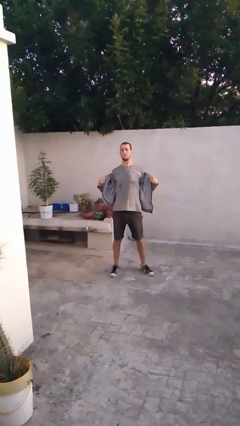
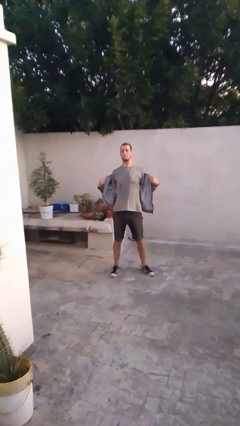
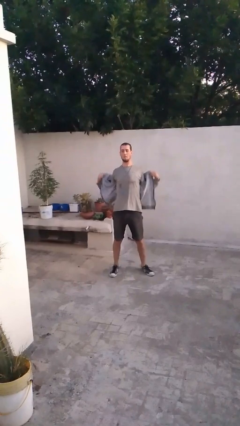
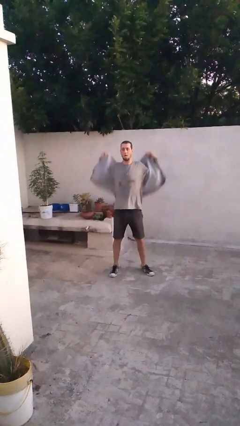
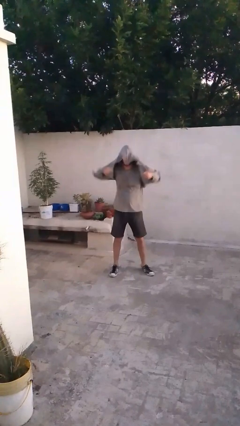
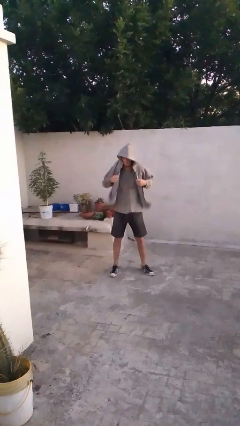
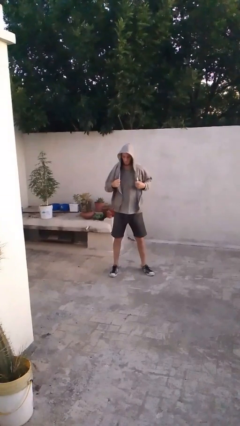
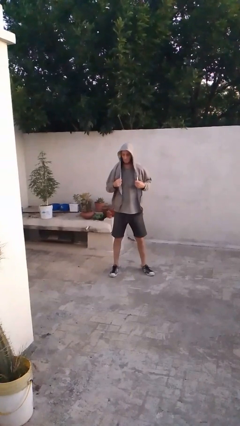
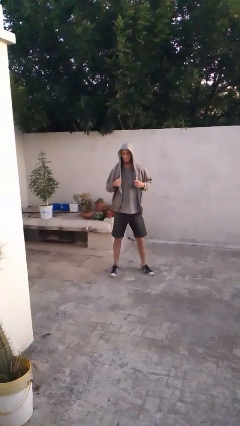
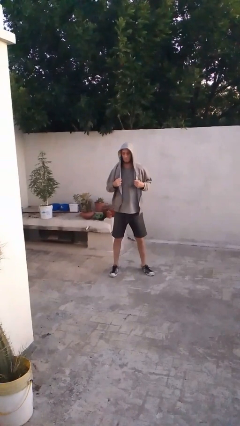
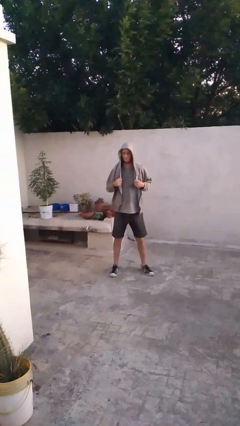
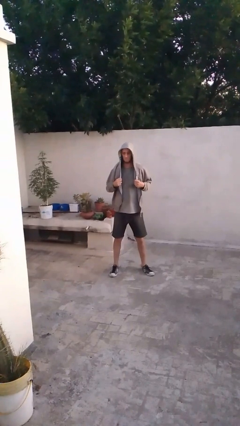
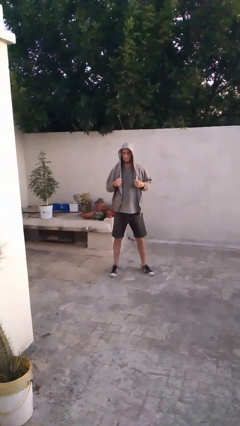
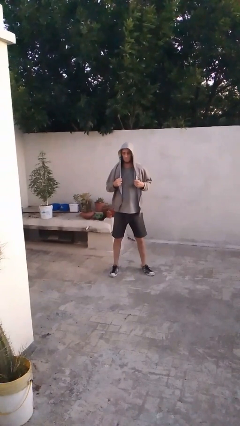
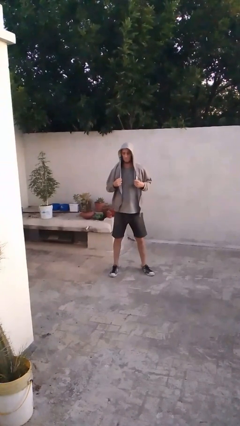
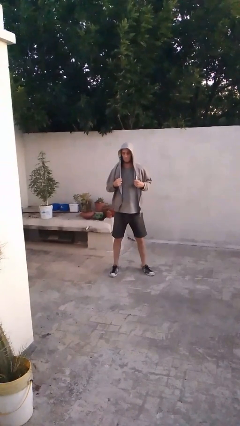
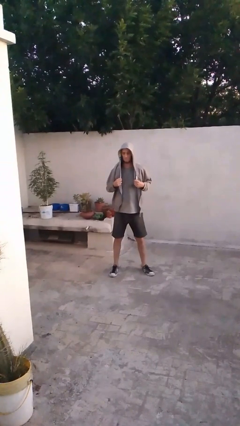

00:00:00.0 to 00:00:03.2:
person puts on hoodie

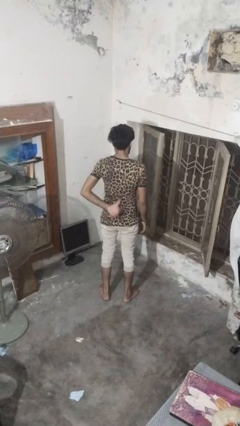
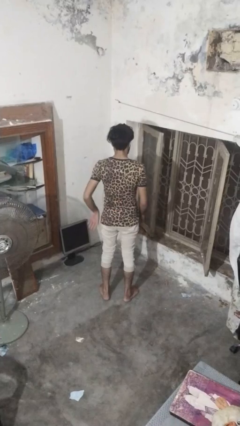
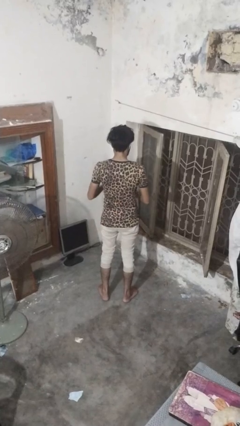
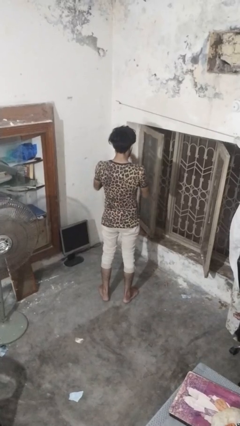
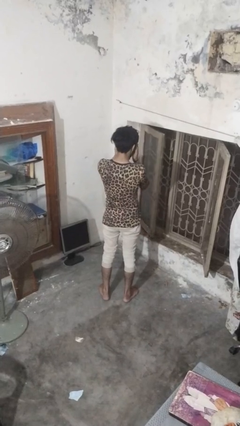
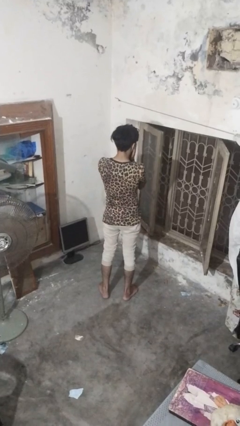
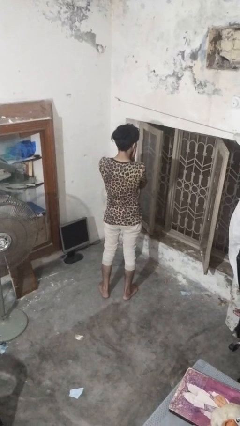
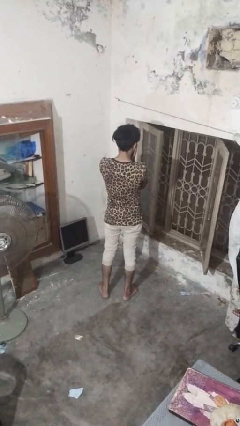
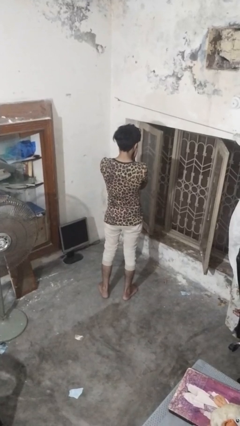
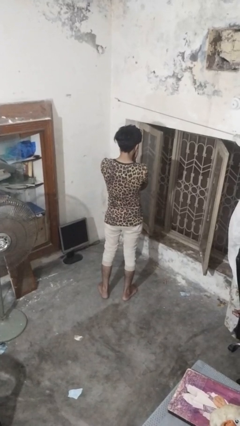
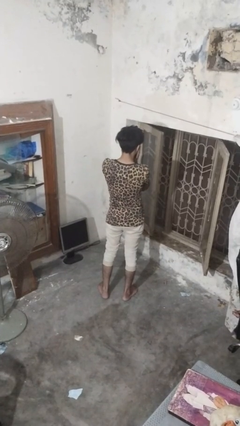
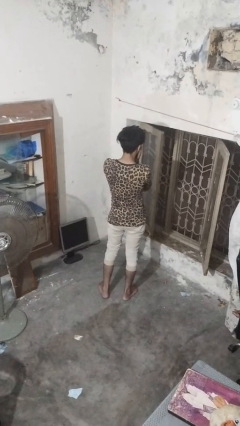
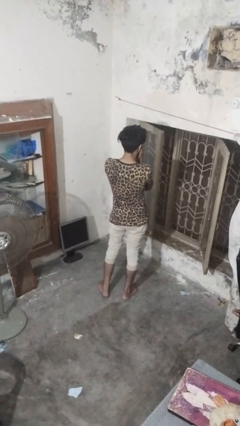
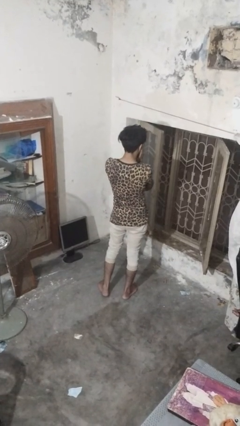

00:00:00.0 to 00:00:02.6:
person covers face with hands

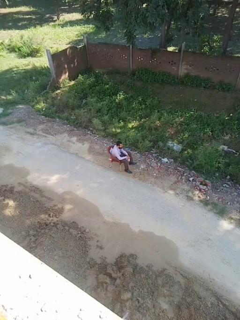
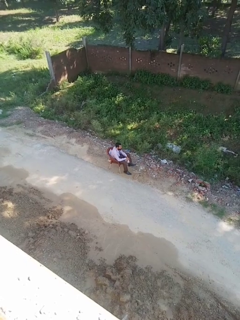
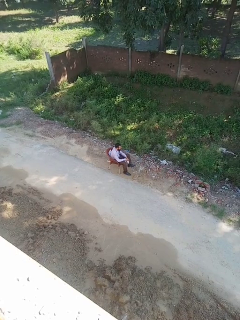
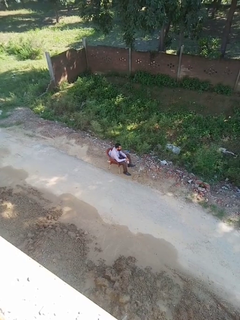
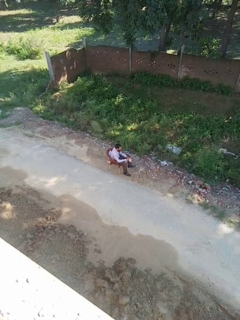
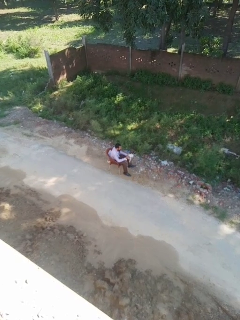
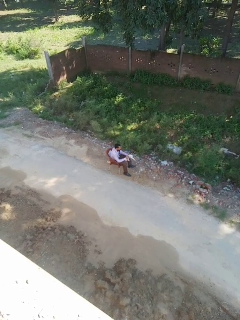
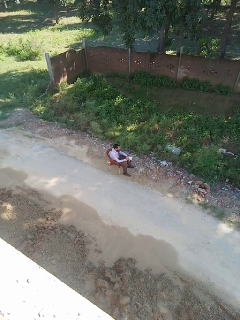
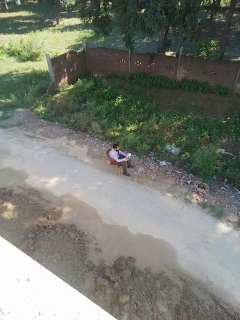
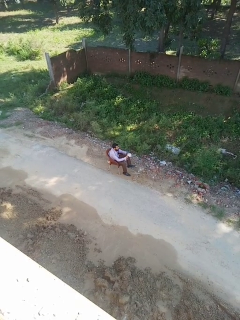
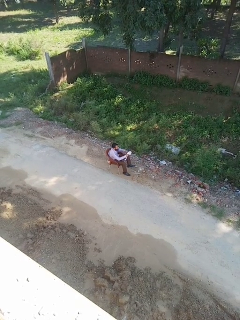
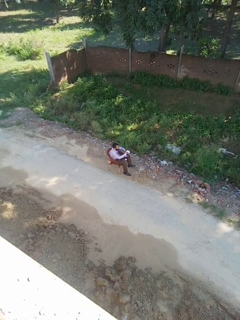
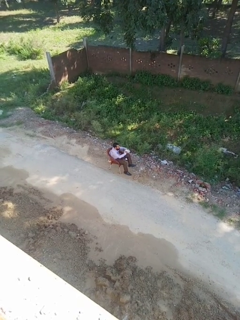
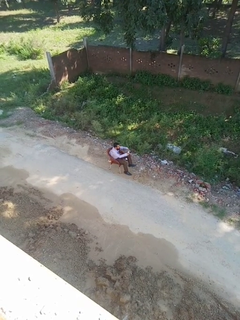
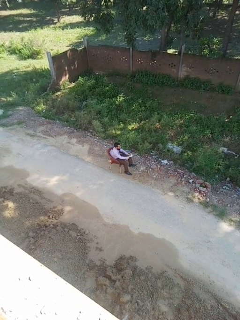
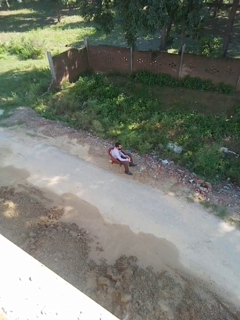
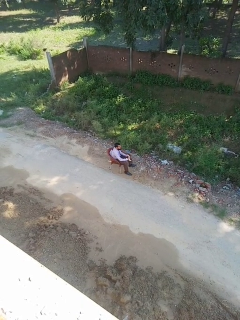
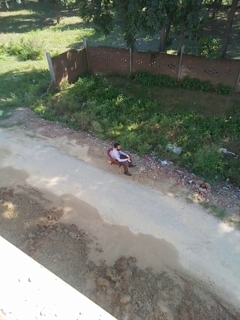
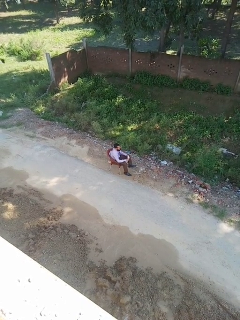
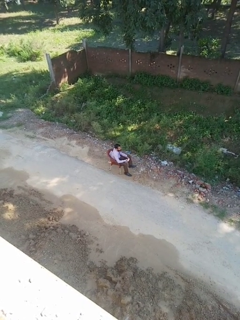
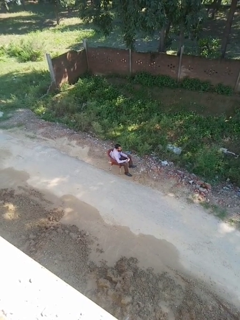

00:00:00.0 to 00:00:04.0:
person squeezes object

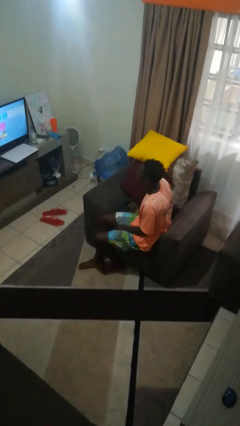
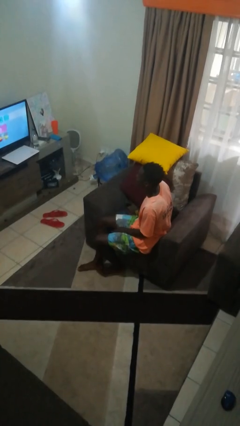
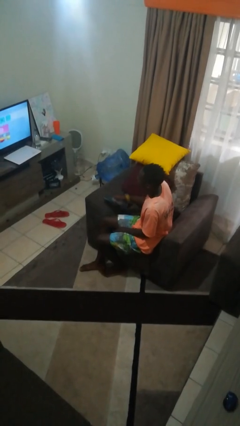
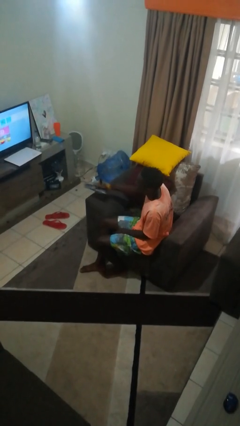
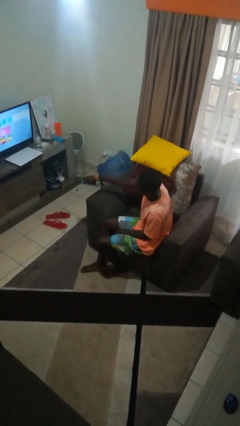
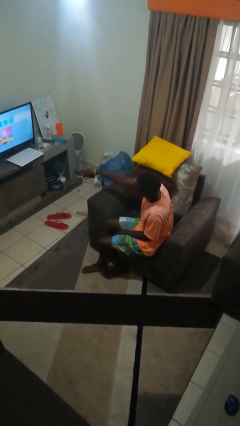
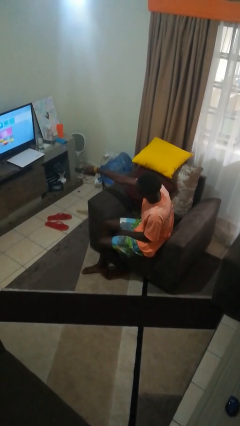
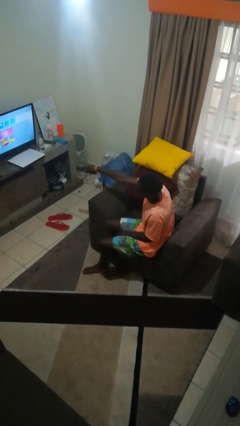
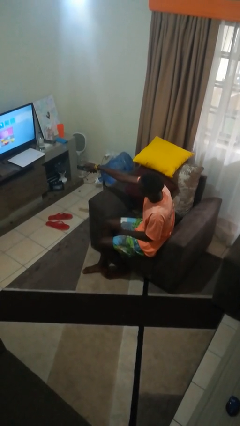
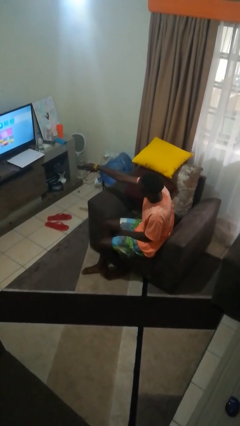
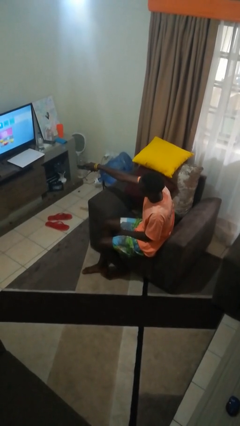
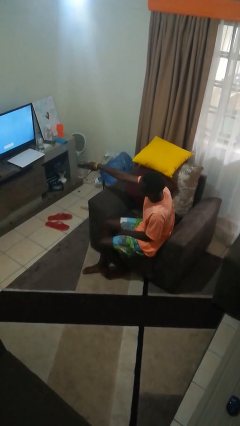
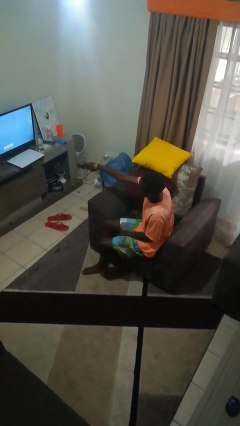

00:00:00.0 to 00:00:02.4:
person uses television remote

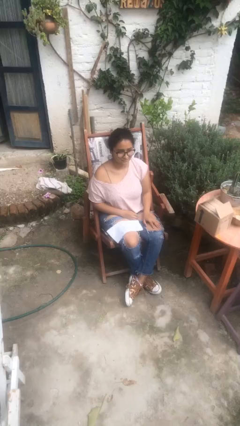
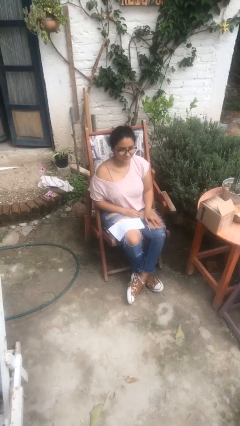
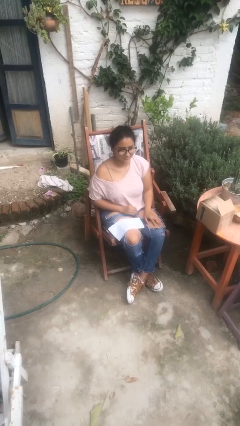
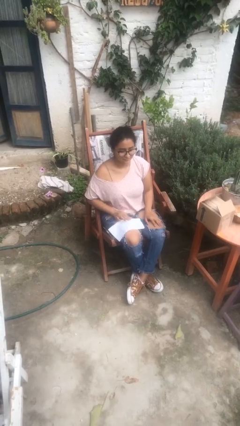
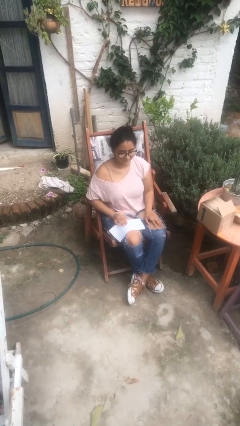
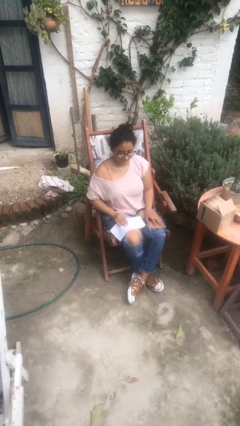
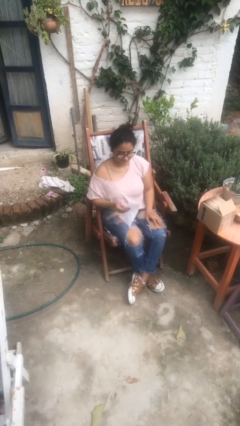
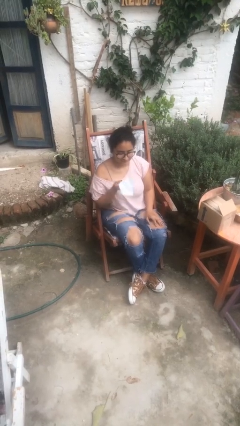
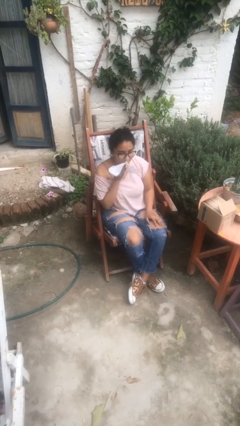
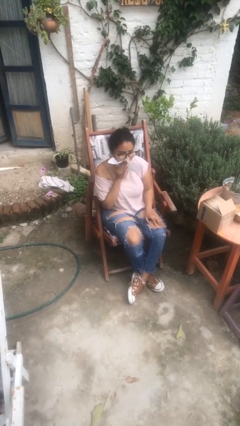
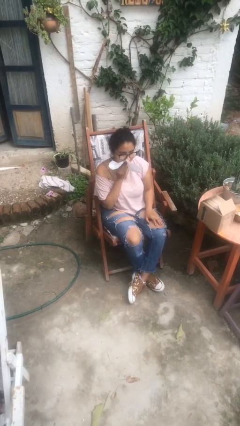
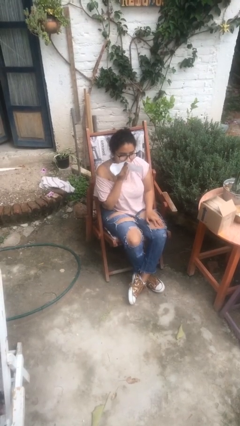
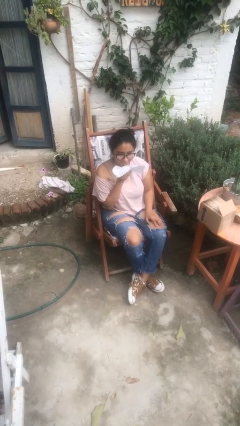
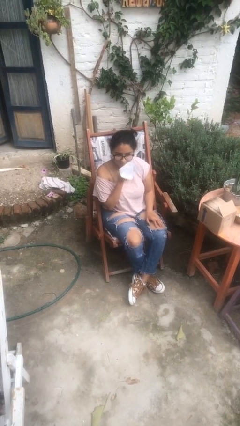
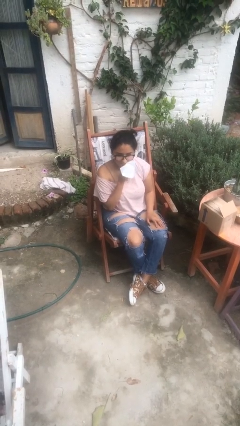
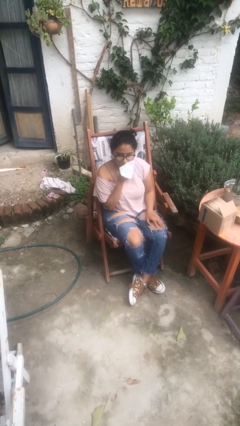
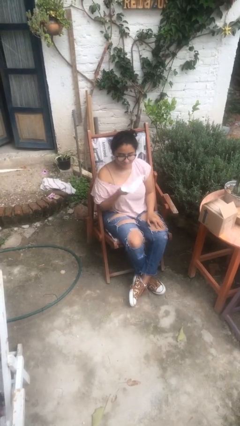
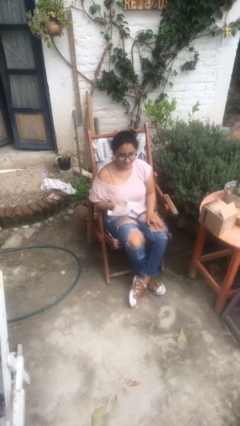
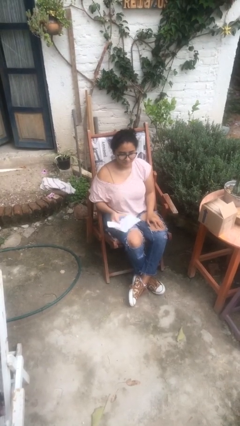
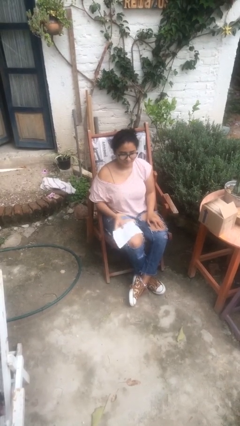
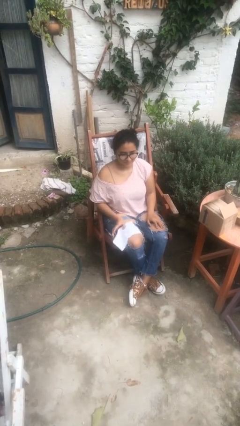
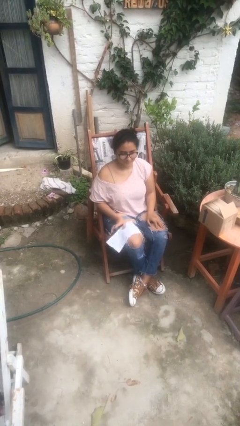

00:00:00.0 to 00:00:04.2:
person wipes mouth with napkin

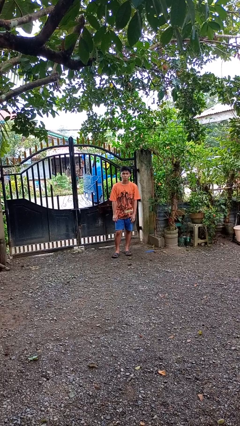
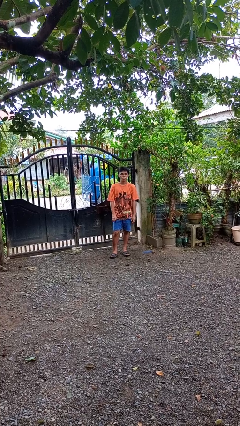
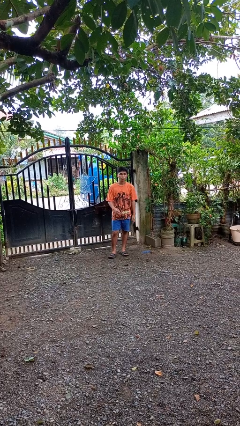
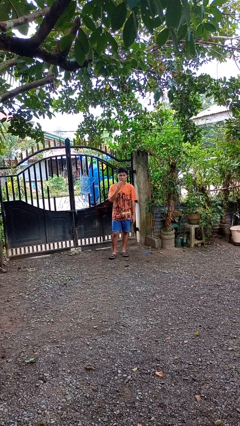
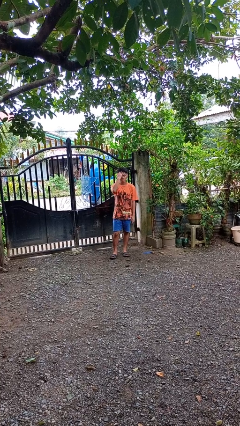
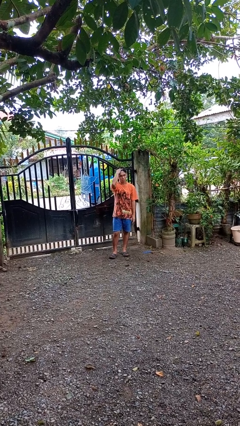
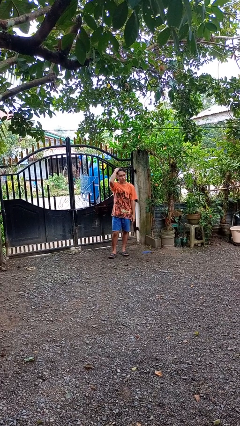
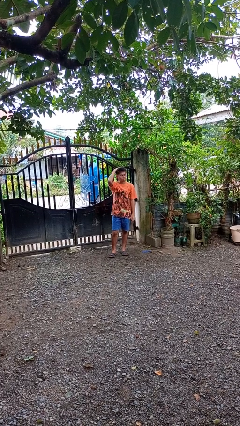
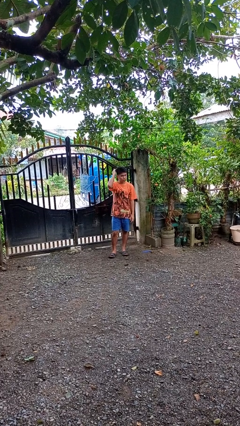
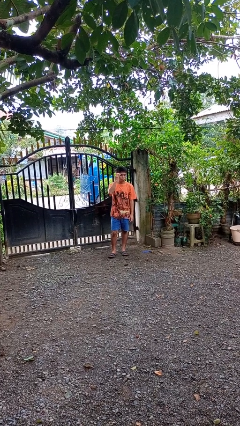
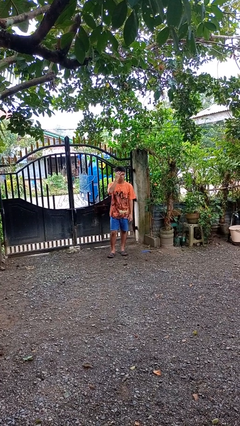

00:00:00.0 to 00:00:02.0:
person strokes hair
